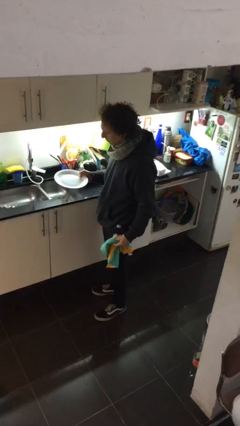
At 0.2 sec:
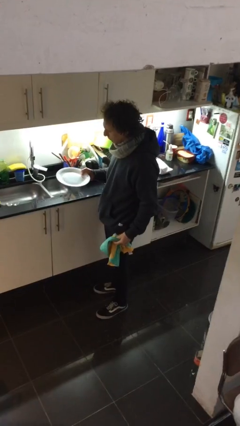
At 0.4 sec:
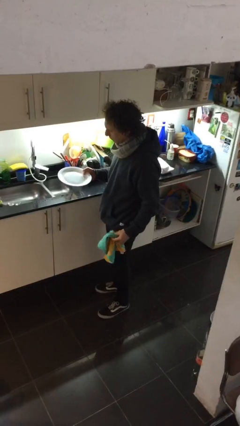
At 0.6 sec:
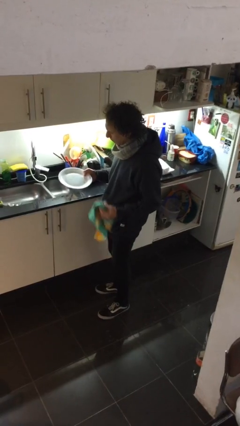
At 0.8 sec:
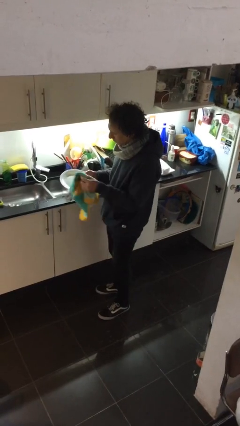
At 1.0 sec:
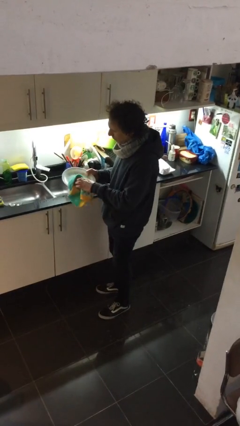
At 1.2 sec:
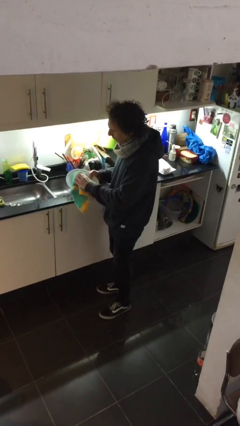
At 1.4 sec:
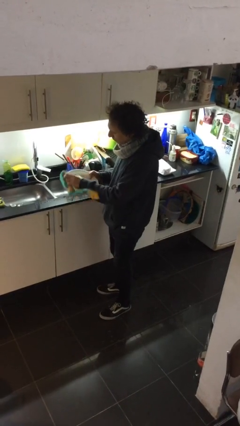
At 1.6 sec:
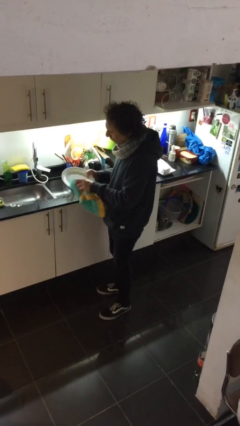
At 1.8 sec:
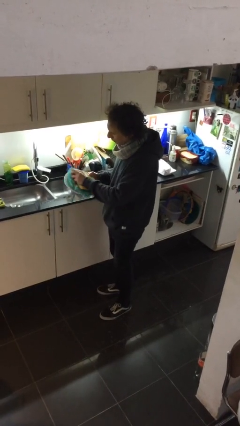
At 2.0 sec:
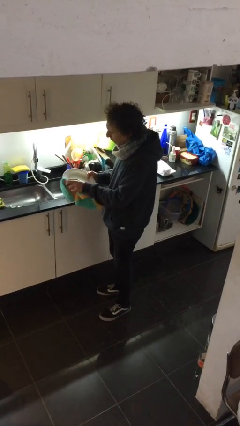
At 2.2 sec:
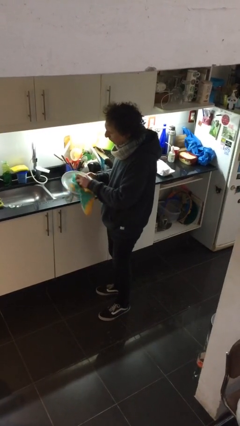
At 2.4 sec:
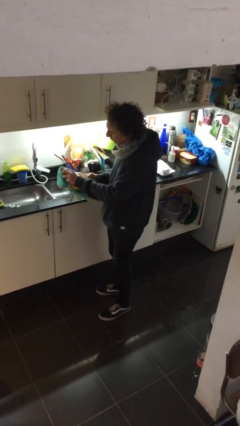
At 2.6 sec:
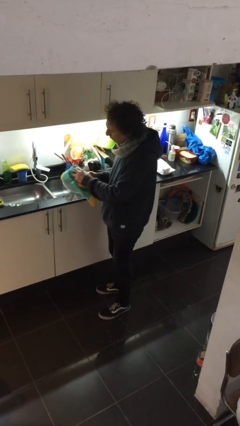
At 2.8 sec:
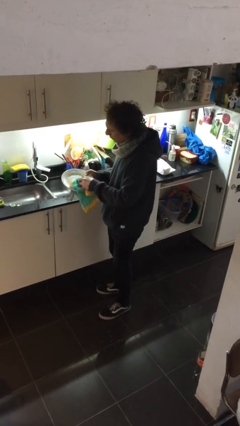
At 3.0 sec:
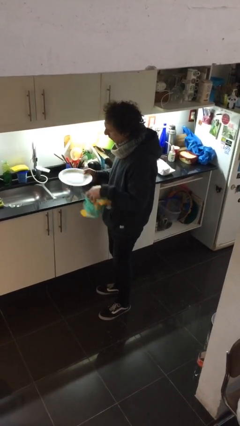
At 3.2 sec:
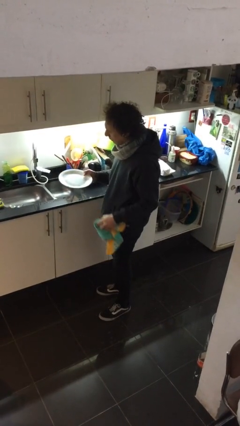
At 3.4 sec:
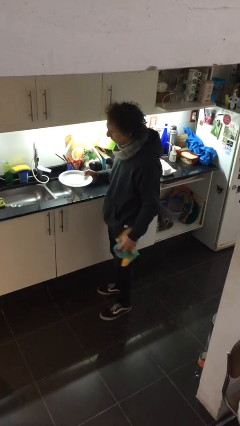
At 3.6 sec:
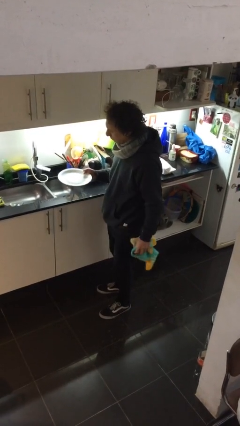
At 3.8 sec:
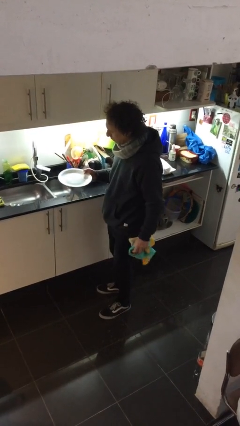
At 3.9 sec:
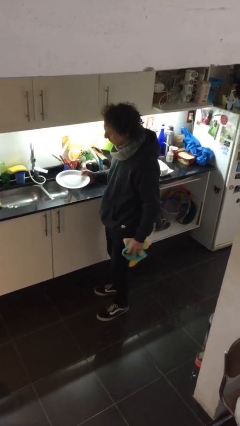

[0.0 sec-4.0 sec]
person dries dish

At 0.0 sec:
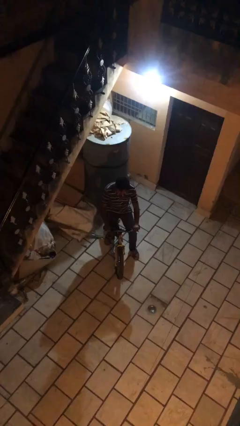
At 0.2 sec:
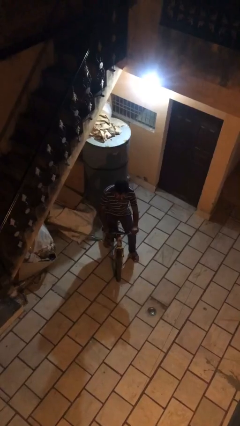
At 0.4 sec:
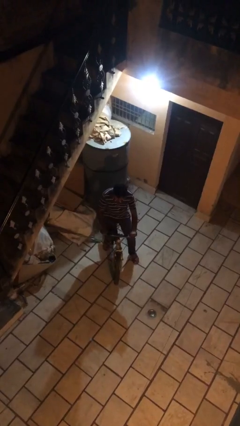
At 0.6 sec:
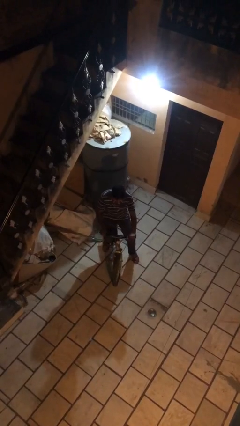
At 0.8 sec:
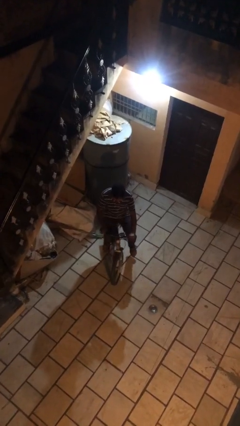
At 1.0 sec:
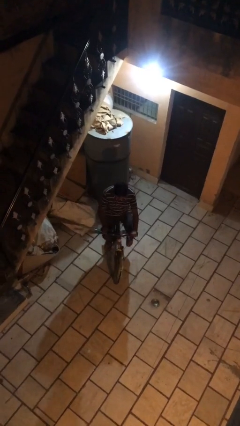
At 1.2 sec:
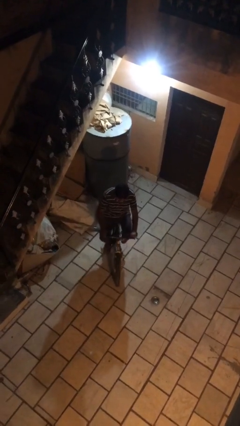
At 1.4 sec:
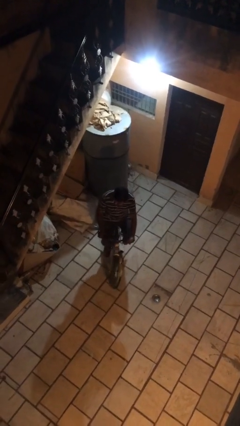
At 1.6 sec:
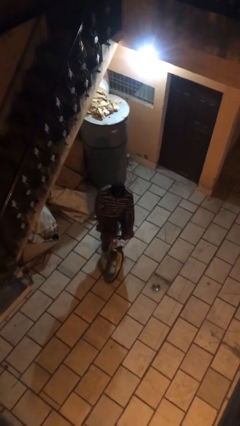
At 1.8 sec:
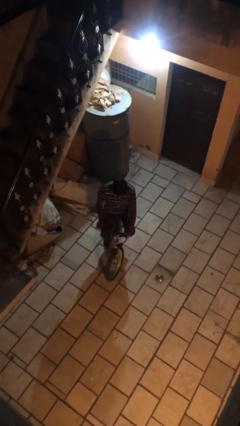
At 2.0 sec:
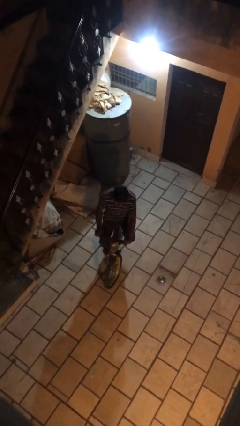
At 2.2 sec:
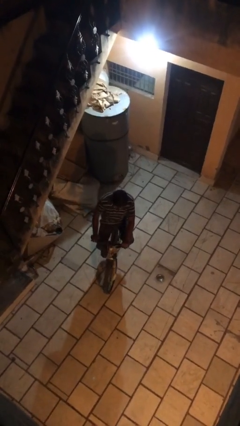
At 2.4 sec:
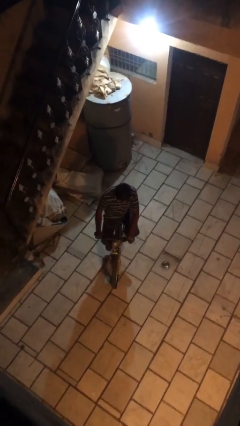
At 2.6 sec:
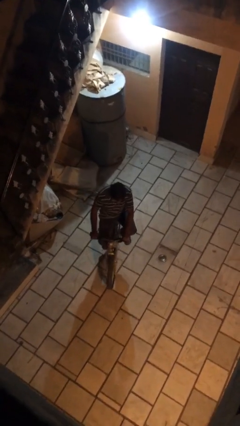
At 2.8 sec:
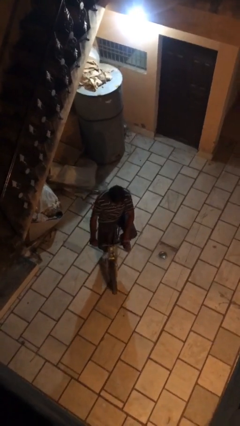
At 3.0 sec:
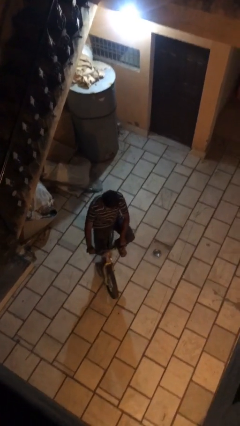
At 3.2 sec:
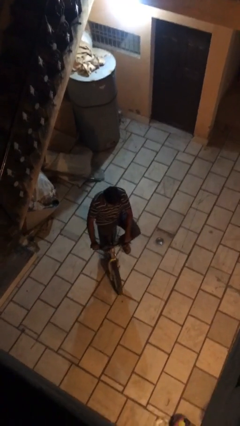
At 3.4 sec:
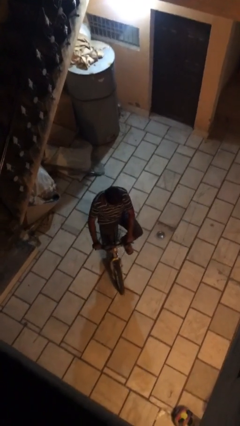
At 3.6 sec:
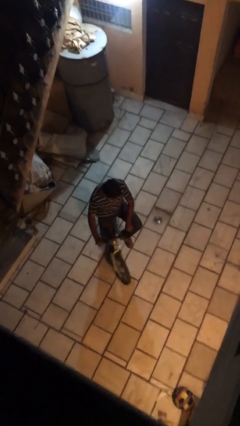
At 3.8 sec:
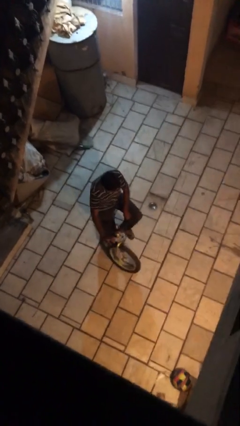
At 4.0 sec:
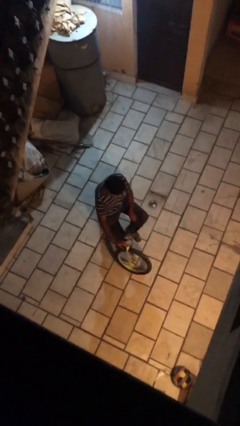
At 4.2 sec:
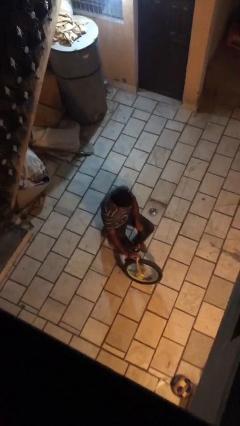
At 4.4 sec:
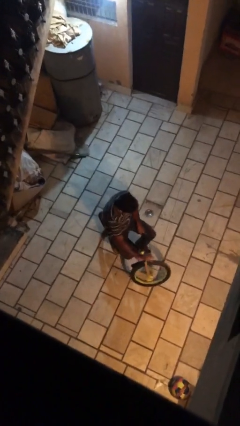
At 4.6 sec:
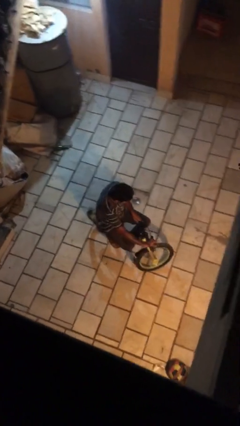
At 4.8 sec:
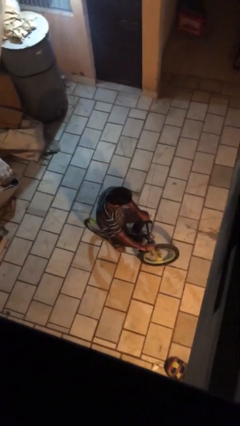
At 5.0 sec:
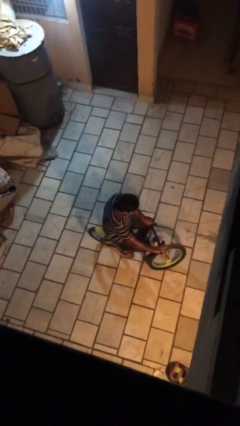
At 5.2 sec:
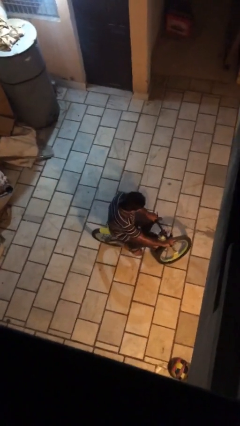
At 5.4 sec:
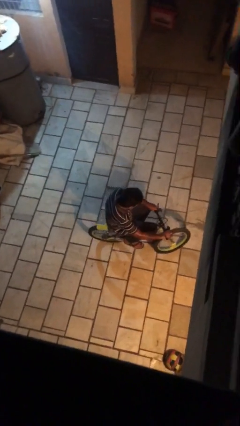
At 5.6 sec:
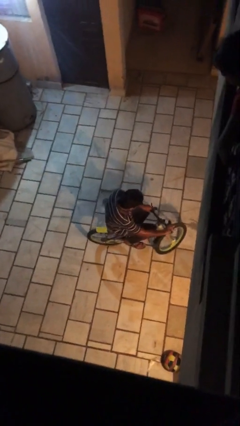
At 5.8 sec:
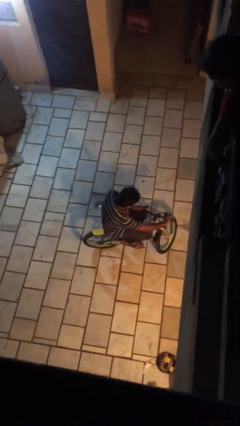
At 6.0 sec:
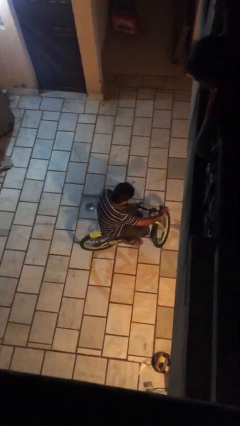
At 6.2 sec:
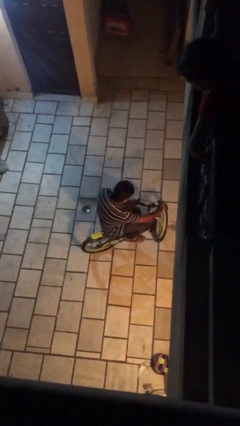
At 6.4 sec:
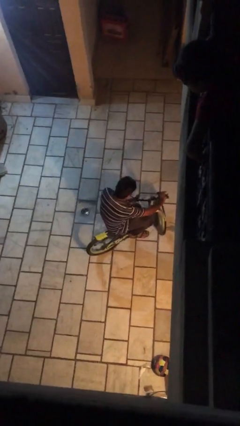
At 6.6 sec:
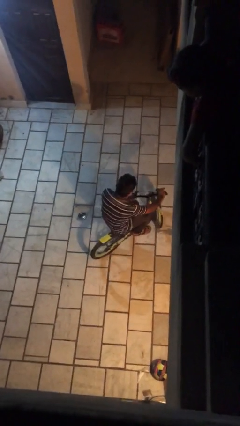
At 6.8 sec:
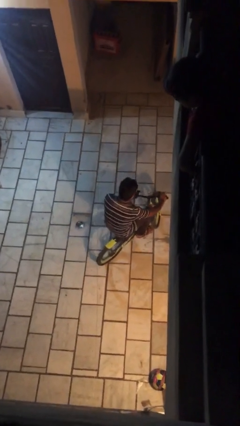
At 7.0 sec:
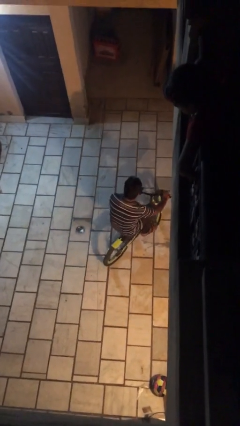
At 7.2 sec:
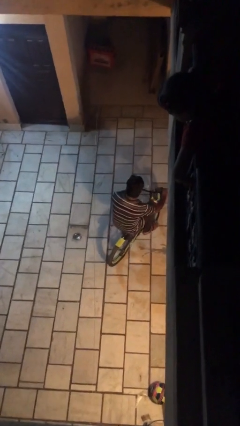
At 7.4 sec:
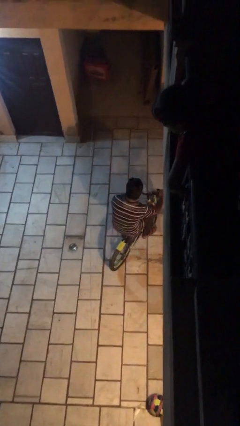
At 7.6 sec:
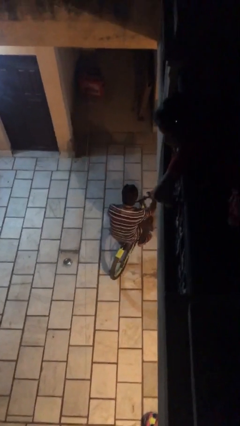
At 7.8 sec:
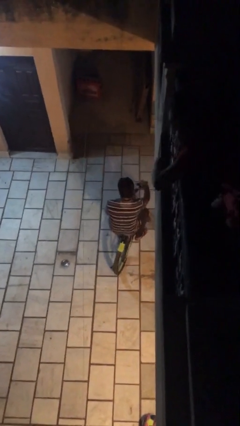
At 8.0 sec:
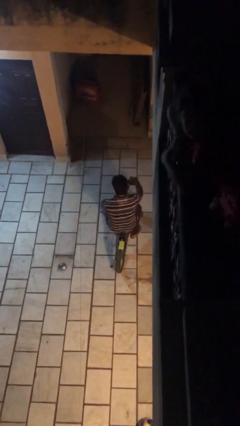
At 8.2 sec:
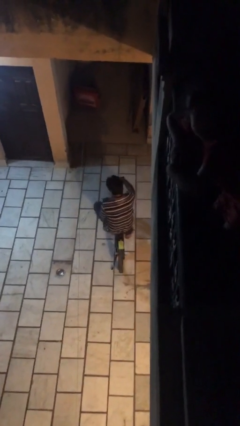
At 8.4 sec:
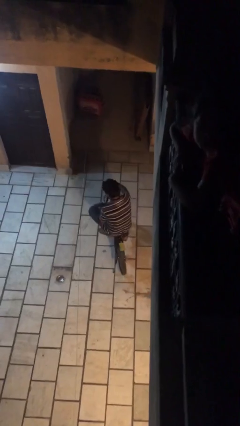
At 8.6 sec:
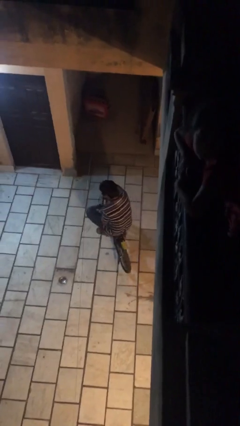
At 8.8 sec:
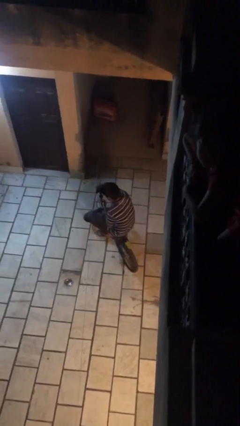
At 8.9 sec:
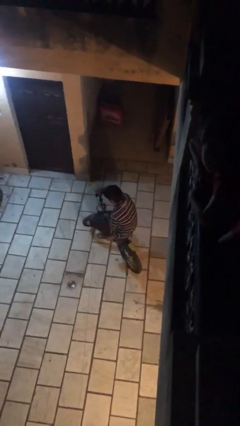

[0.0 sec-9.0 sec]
person rides bicycle

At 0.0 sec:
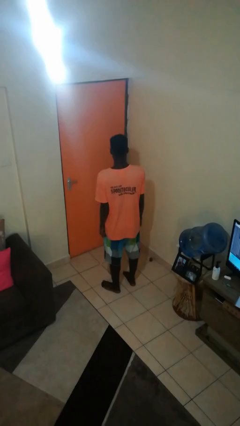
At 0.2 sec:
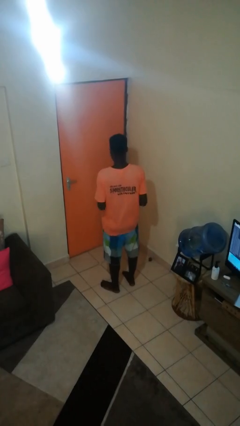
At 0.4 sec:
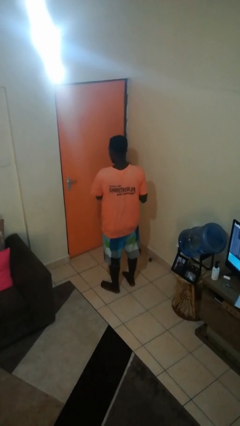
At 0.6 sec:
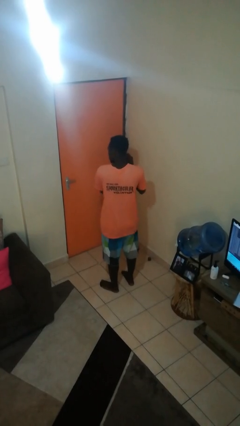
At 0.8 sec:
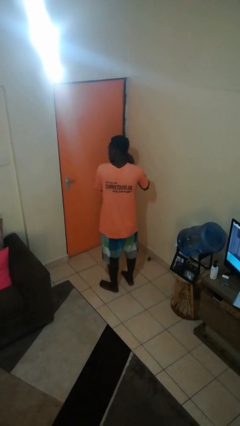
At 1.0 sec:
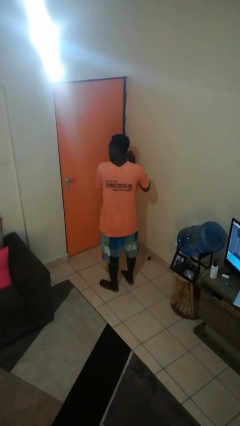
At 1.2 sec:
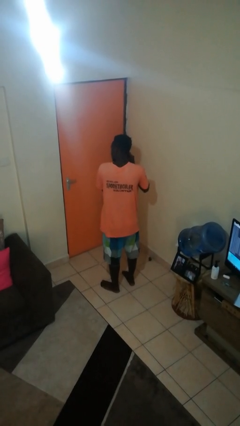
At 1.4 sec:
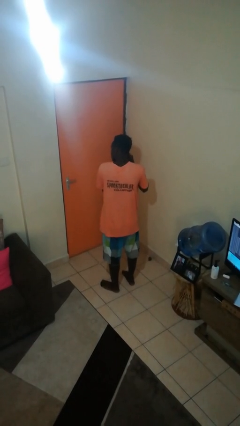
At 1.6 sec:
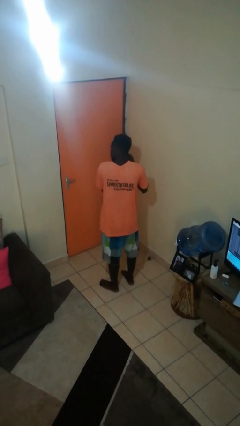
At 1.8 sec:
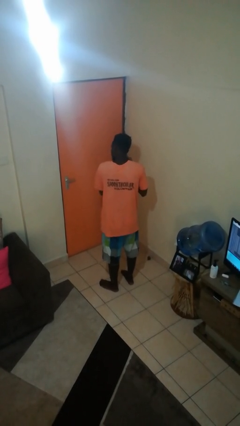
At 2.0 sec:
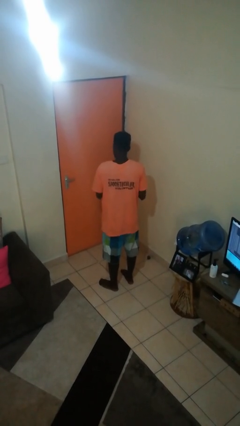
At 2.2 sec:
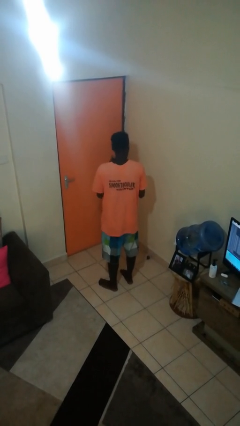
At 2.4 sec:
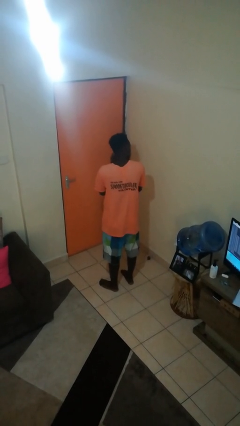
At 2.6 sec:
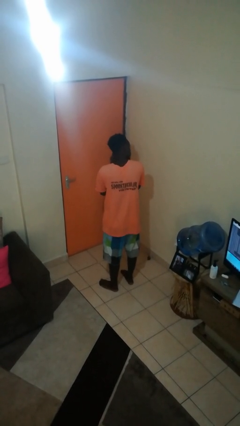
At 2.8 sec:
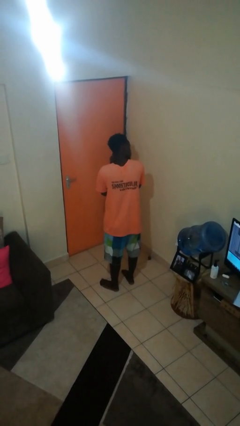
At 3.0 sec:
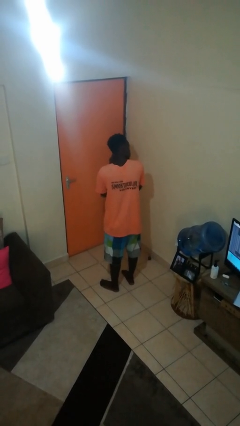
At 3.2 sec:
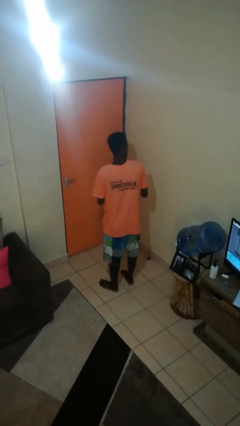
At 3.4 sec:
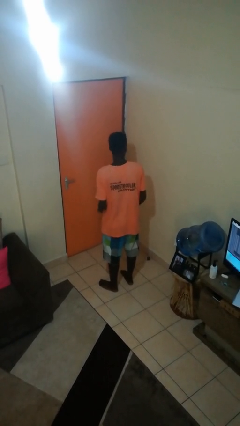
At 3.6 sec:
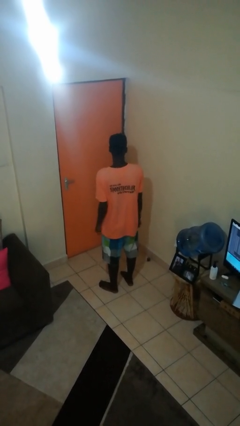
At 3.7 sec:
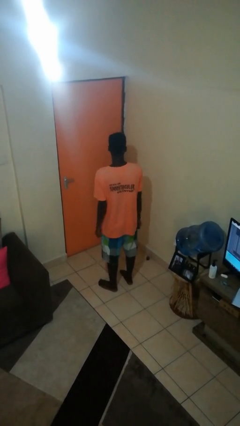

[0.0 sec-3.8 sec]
person takes off earrings

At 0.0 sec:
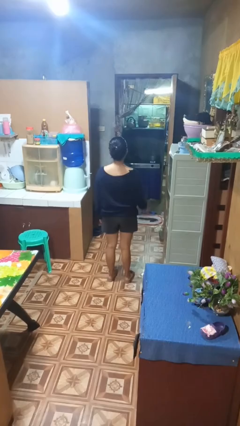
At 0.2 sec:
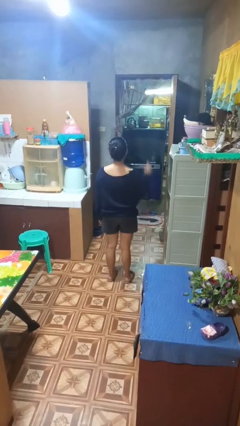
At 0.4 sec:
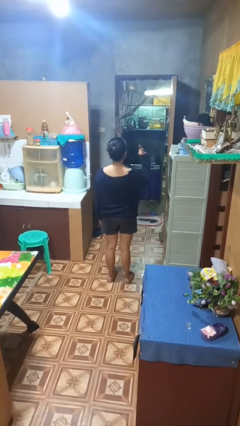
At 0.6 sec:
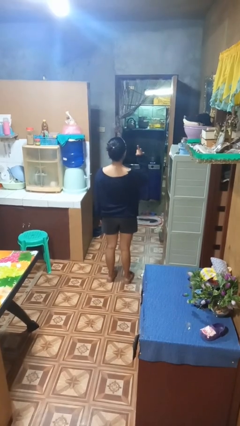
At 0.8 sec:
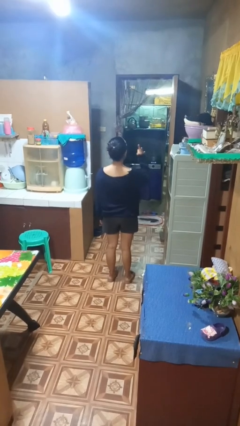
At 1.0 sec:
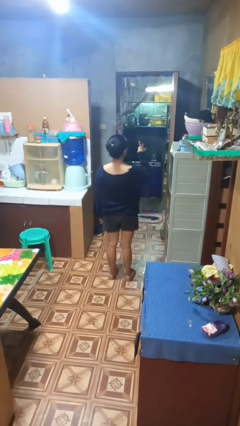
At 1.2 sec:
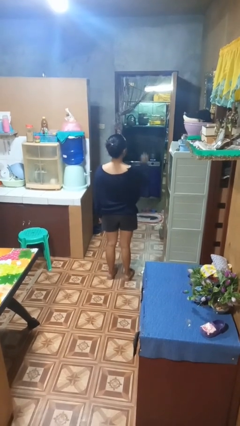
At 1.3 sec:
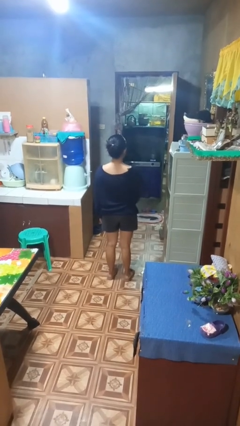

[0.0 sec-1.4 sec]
person gestures number three
